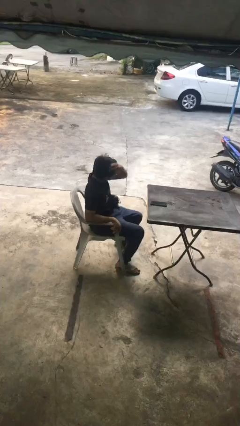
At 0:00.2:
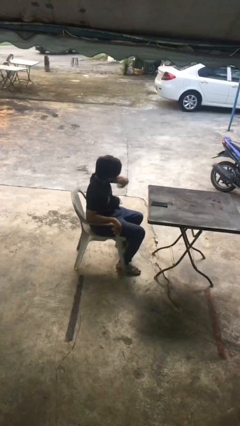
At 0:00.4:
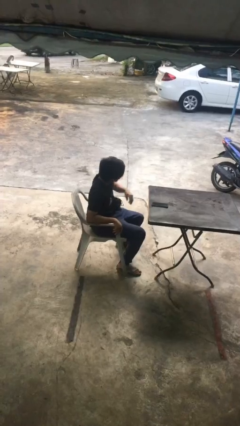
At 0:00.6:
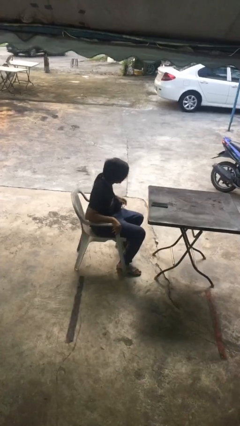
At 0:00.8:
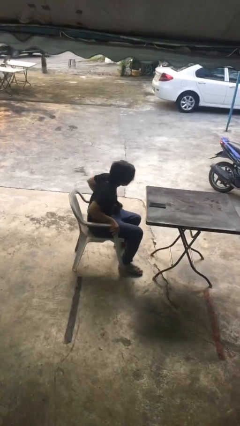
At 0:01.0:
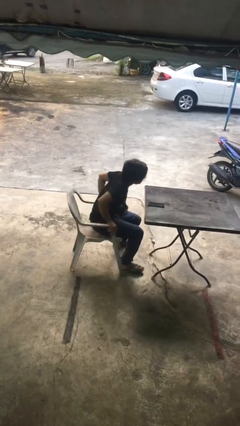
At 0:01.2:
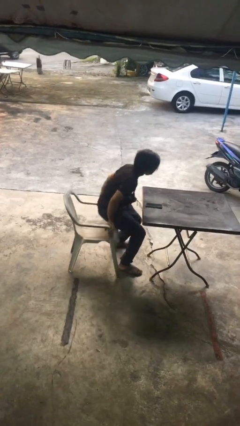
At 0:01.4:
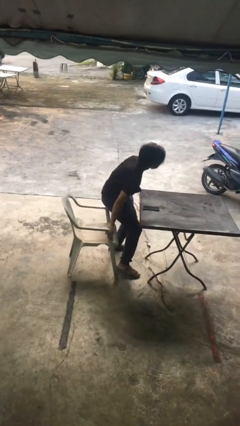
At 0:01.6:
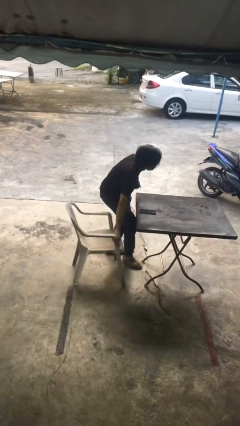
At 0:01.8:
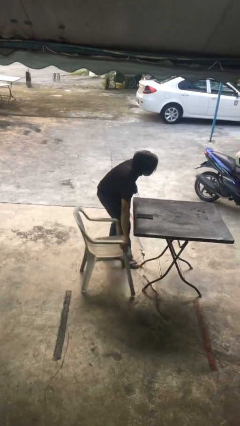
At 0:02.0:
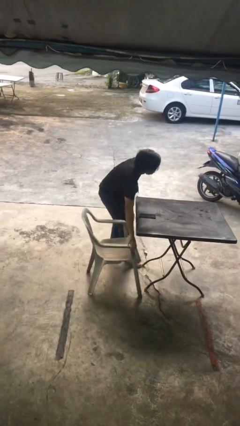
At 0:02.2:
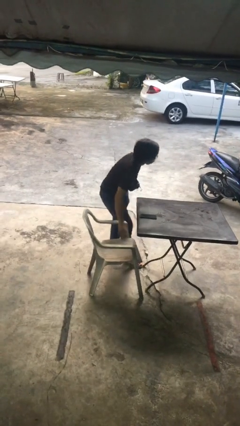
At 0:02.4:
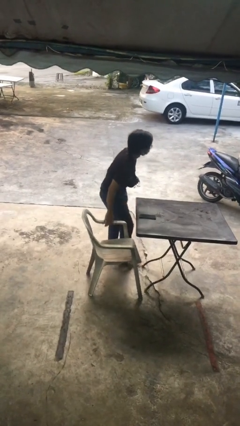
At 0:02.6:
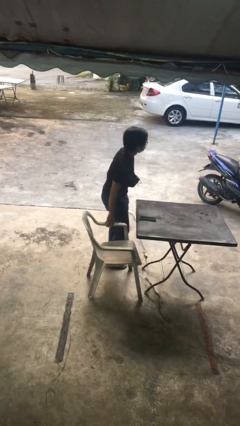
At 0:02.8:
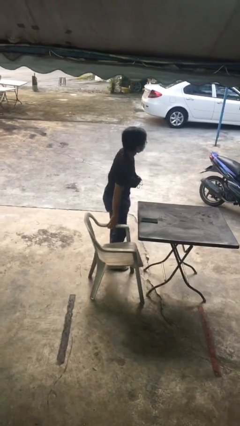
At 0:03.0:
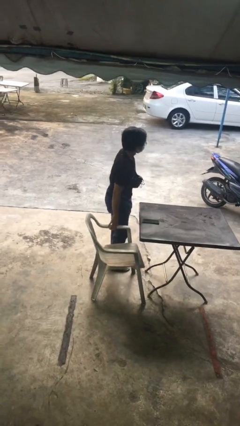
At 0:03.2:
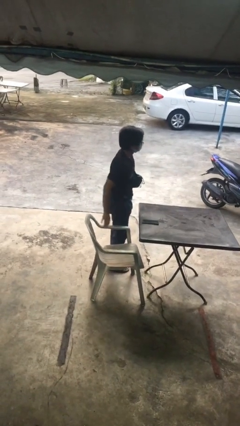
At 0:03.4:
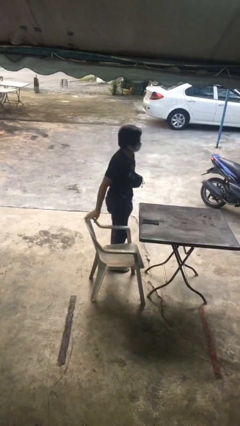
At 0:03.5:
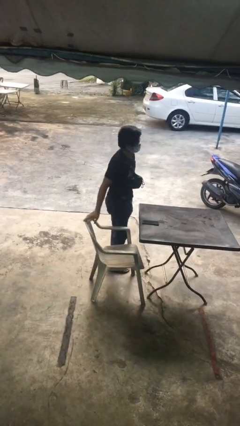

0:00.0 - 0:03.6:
person stands up

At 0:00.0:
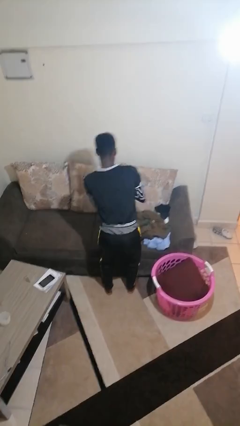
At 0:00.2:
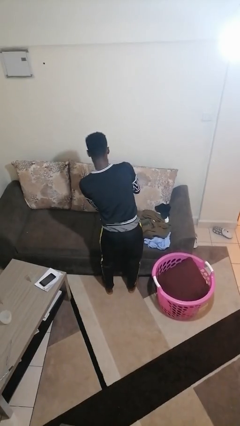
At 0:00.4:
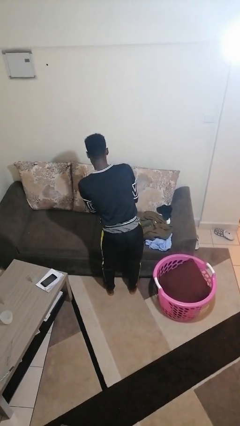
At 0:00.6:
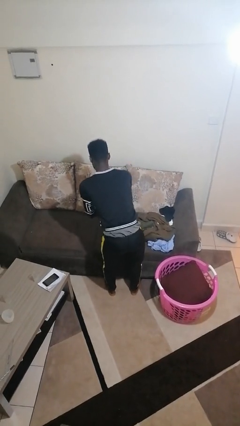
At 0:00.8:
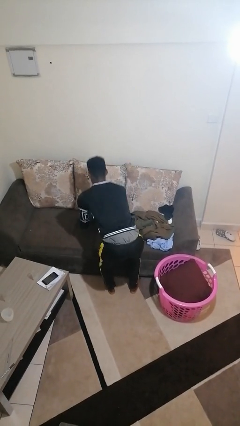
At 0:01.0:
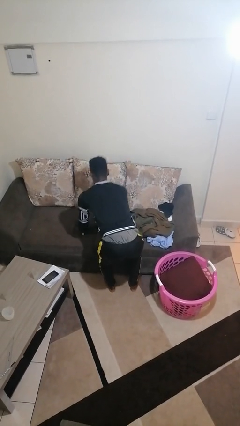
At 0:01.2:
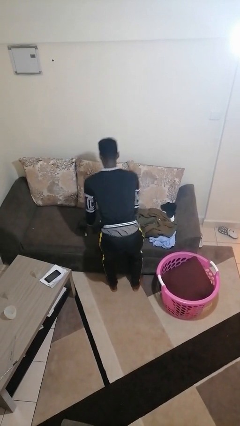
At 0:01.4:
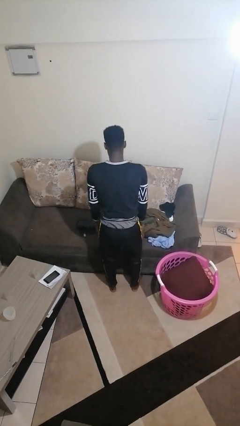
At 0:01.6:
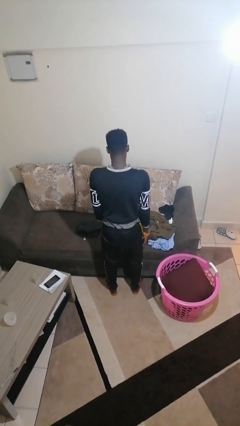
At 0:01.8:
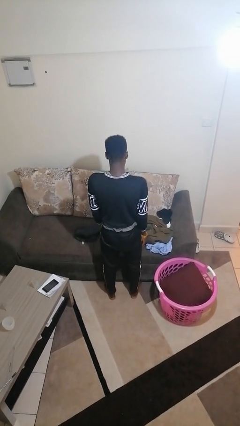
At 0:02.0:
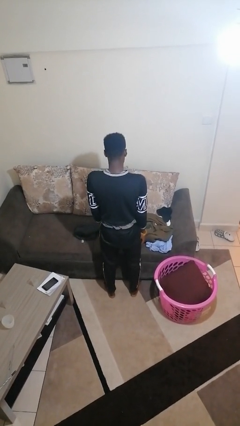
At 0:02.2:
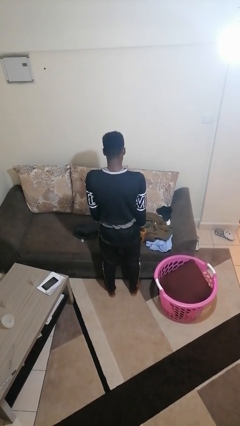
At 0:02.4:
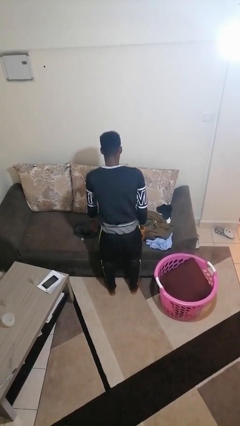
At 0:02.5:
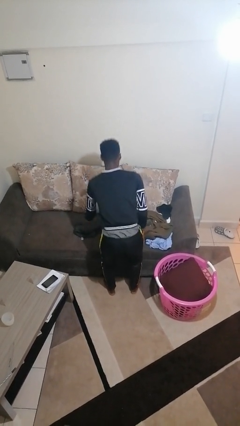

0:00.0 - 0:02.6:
person folds pants

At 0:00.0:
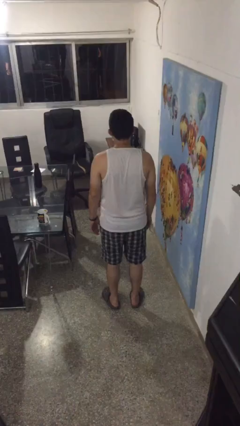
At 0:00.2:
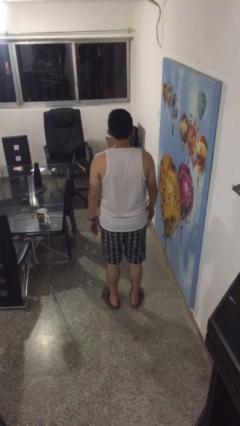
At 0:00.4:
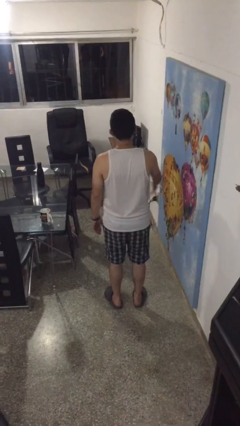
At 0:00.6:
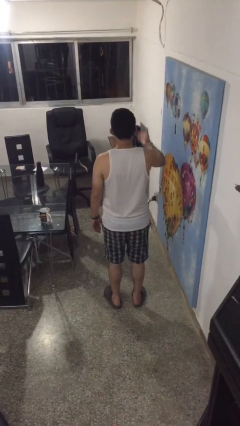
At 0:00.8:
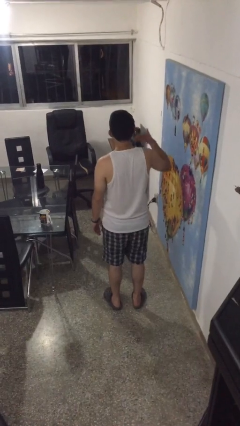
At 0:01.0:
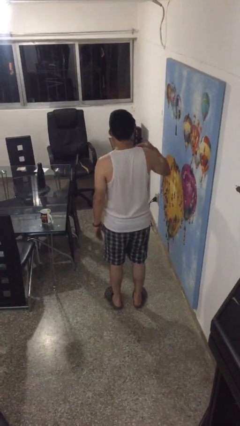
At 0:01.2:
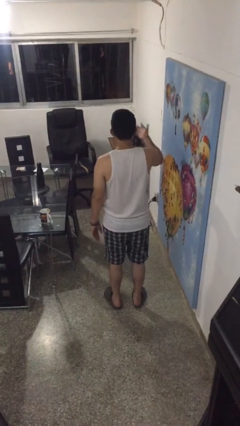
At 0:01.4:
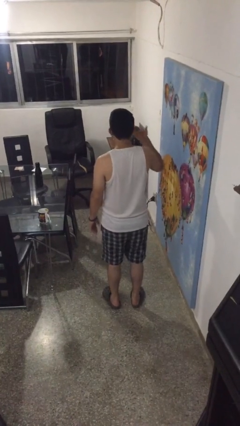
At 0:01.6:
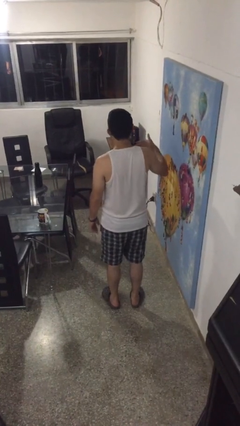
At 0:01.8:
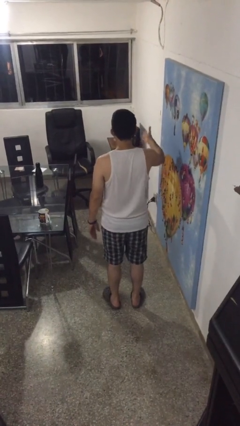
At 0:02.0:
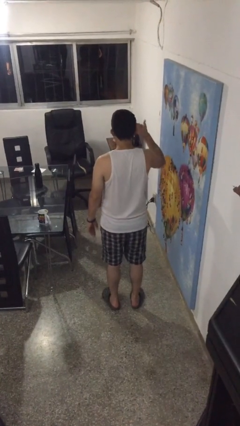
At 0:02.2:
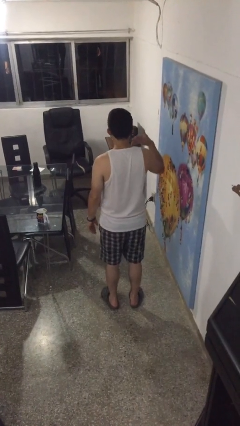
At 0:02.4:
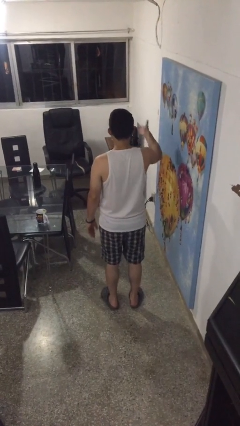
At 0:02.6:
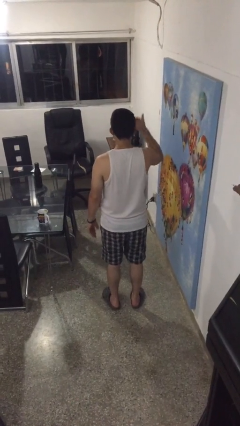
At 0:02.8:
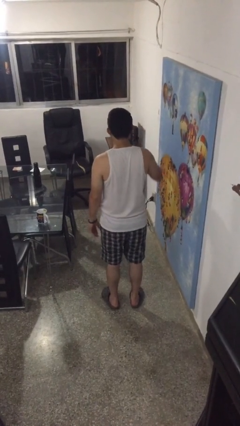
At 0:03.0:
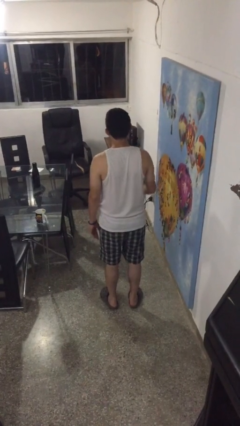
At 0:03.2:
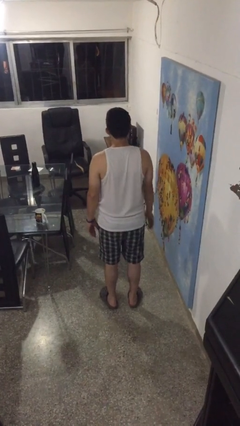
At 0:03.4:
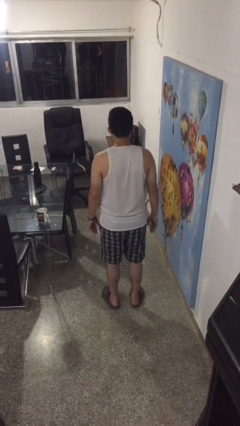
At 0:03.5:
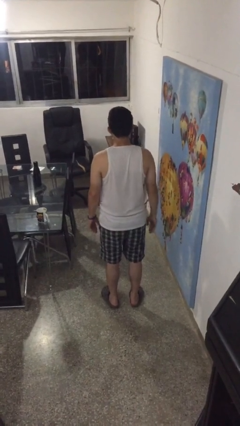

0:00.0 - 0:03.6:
person gestures come here

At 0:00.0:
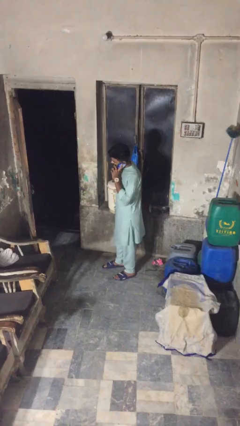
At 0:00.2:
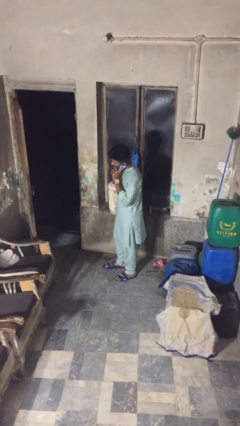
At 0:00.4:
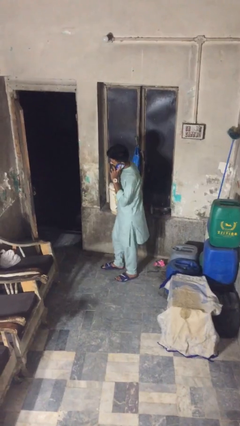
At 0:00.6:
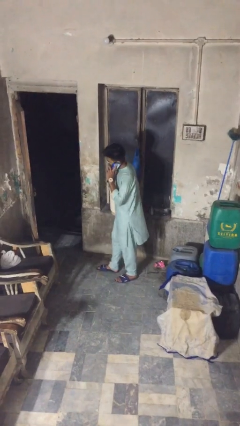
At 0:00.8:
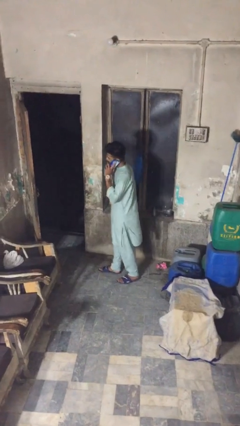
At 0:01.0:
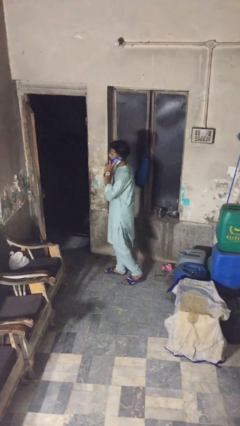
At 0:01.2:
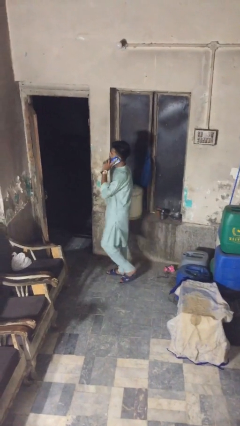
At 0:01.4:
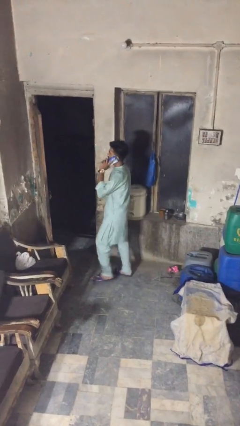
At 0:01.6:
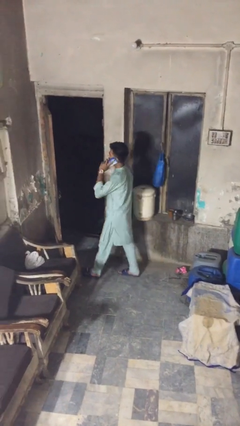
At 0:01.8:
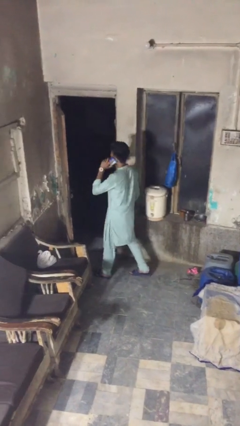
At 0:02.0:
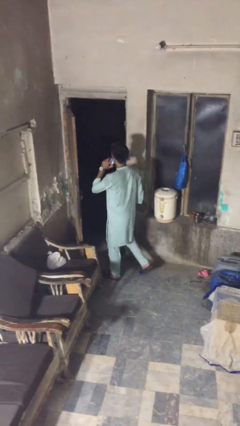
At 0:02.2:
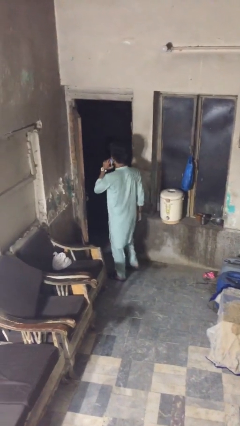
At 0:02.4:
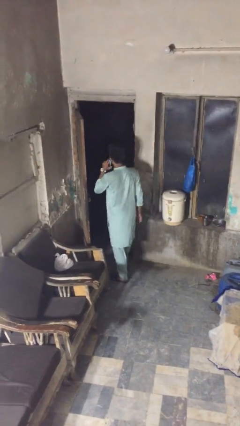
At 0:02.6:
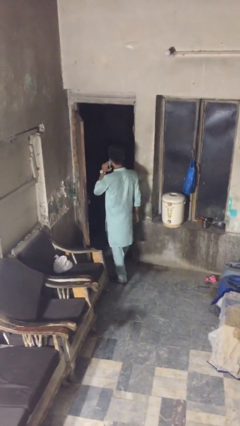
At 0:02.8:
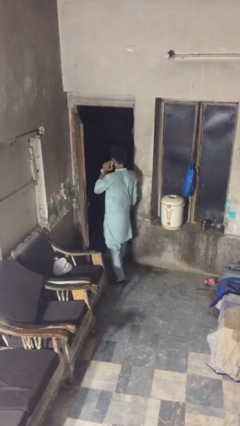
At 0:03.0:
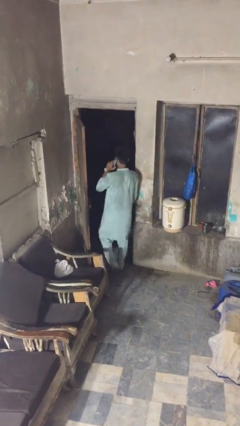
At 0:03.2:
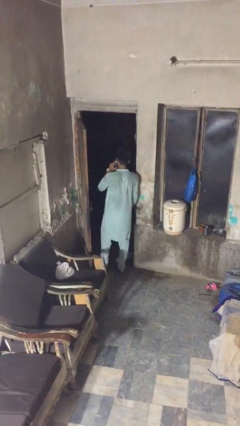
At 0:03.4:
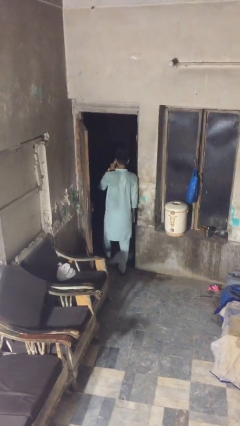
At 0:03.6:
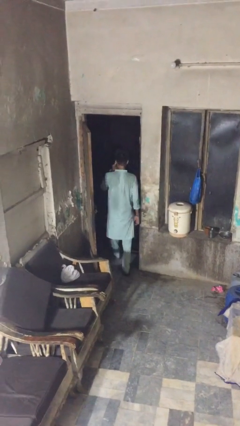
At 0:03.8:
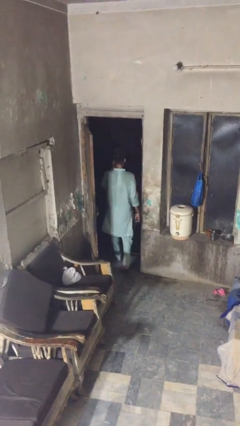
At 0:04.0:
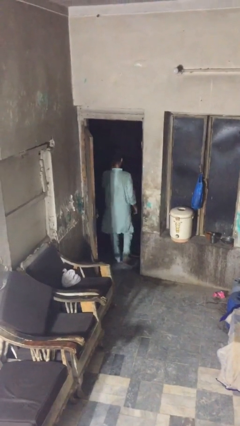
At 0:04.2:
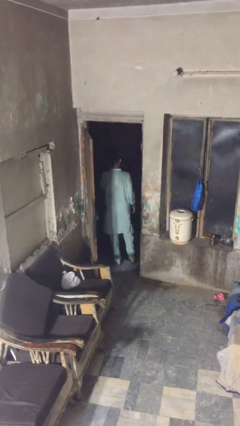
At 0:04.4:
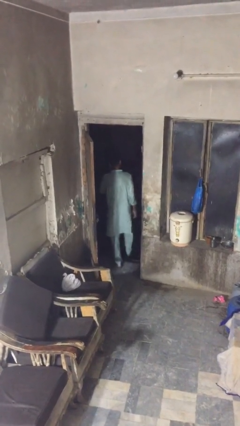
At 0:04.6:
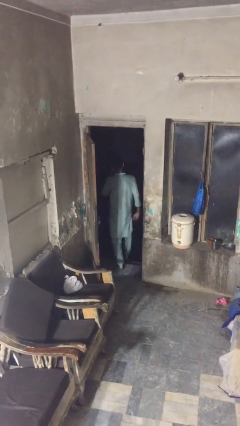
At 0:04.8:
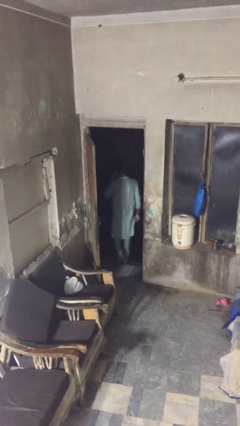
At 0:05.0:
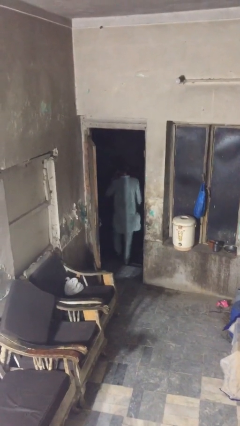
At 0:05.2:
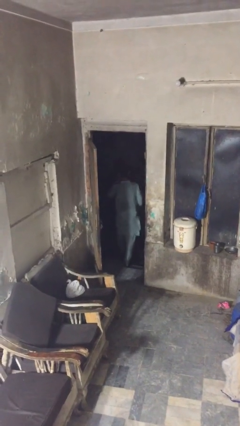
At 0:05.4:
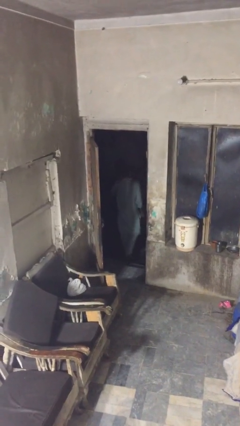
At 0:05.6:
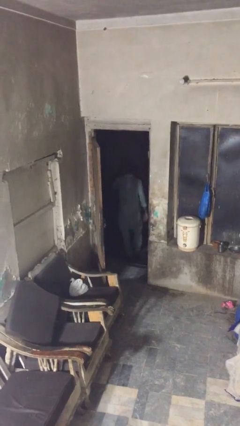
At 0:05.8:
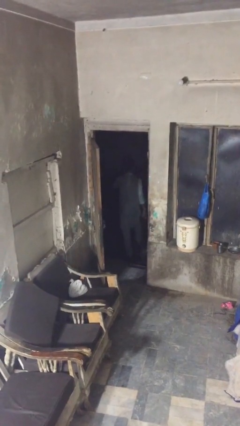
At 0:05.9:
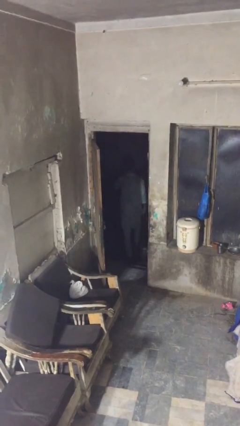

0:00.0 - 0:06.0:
person exits scene through structure

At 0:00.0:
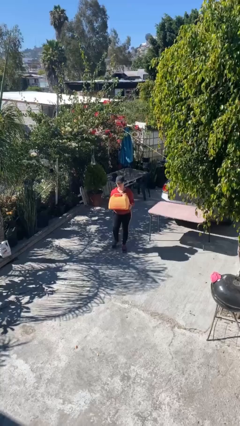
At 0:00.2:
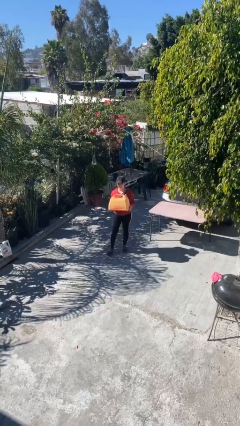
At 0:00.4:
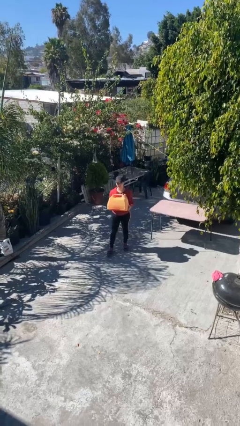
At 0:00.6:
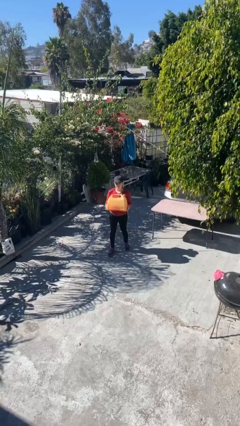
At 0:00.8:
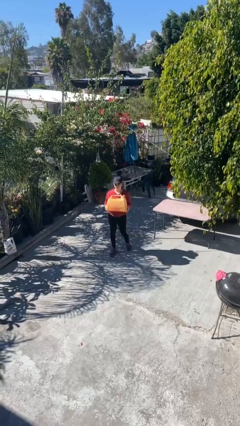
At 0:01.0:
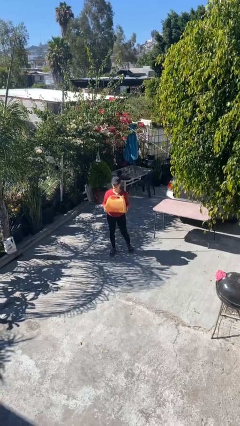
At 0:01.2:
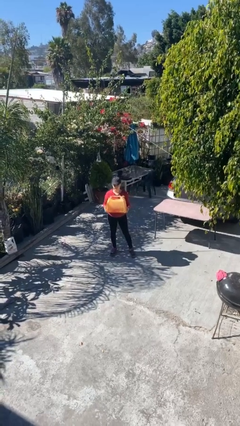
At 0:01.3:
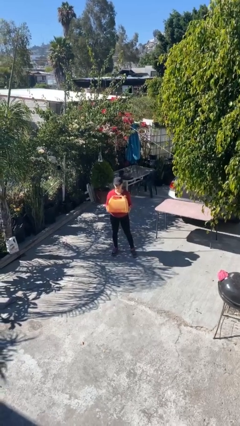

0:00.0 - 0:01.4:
person carries heavy object

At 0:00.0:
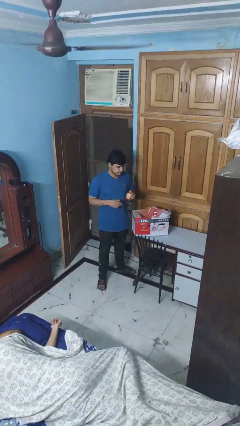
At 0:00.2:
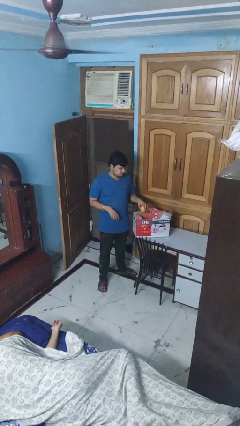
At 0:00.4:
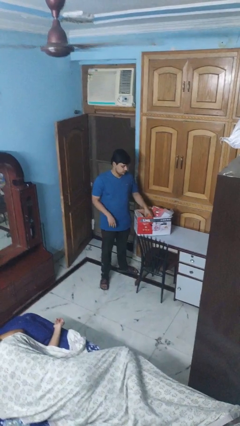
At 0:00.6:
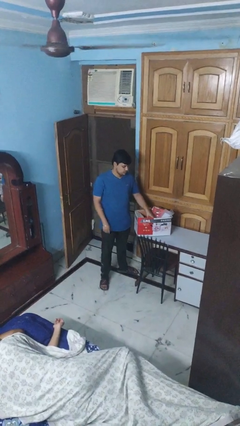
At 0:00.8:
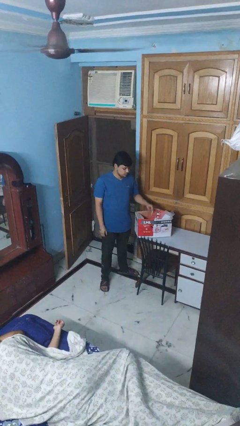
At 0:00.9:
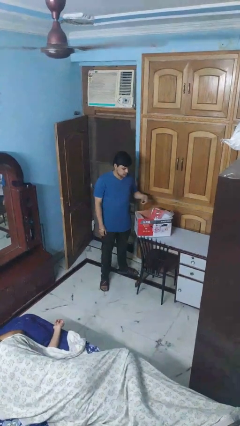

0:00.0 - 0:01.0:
person puts object into box
